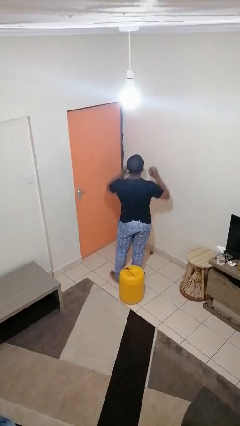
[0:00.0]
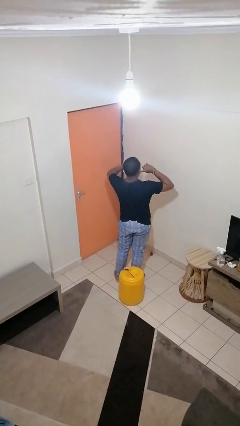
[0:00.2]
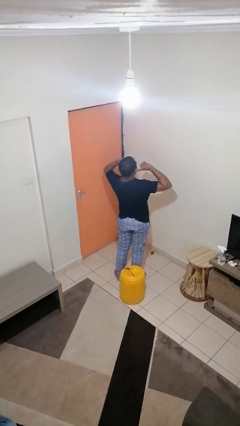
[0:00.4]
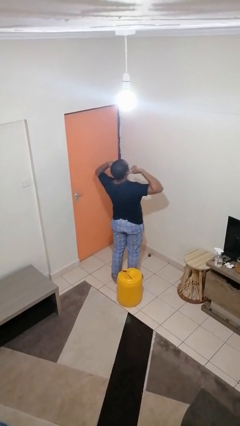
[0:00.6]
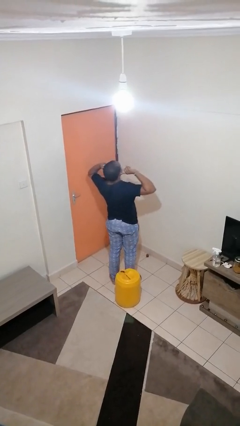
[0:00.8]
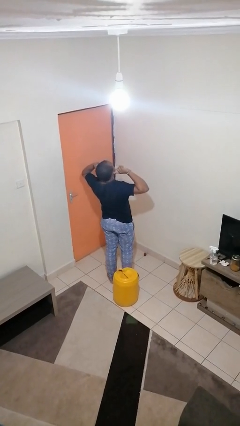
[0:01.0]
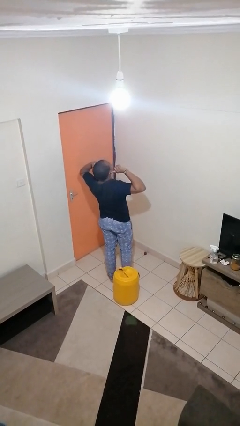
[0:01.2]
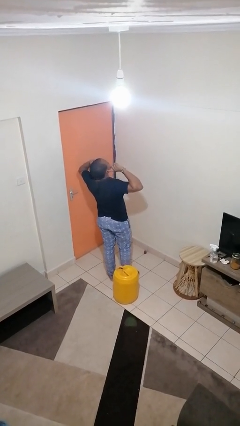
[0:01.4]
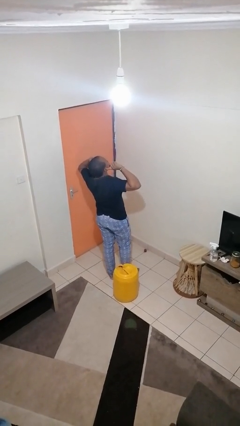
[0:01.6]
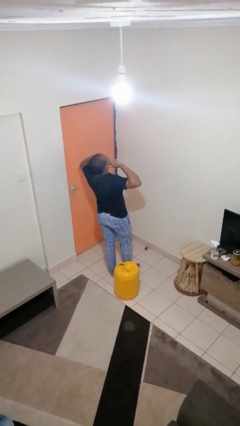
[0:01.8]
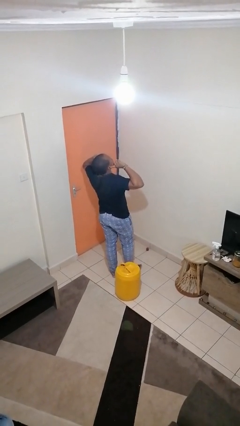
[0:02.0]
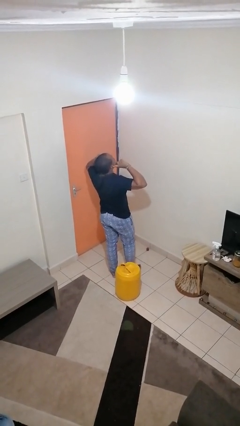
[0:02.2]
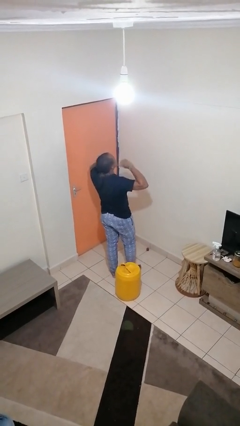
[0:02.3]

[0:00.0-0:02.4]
person puts fingers in ear

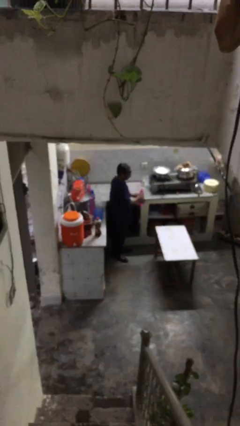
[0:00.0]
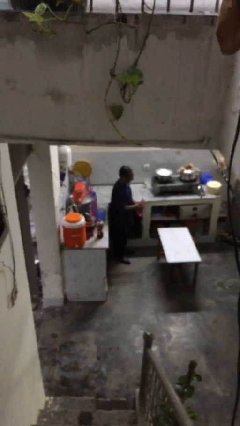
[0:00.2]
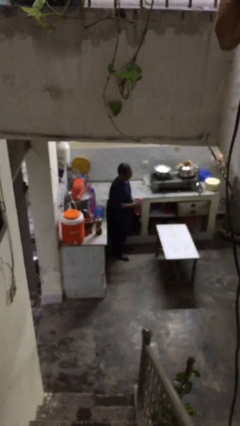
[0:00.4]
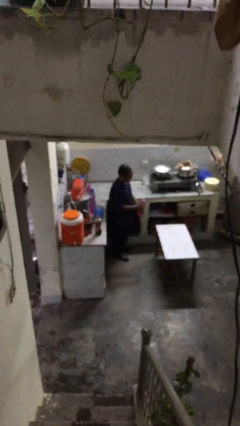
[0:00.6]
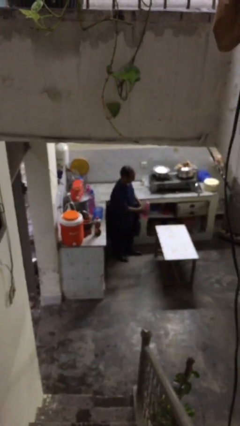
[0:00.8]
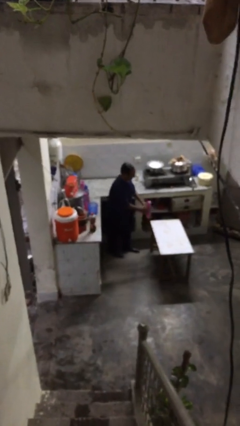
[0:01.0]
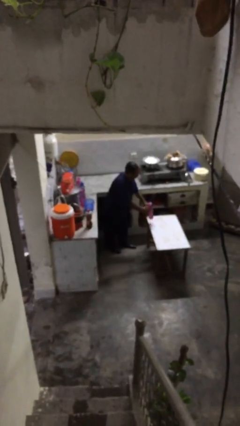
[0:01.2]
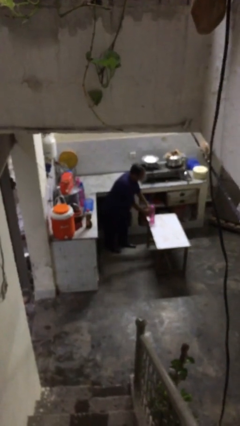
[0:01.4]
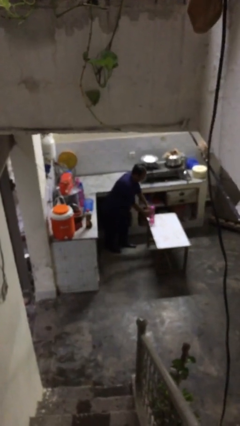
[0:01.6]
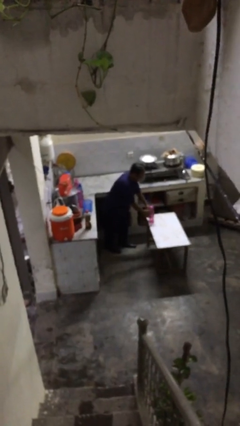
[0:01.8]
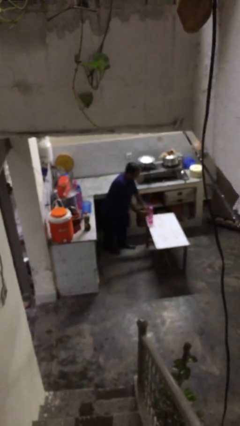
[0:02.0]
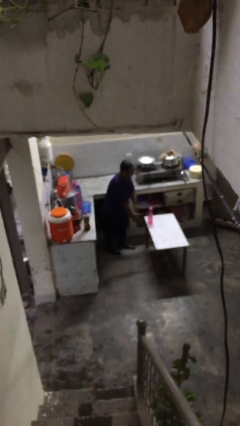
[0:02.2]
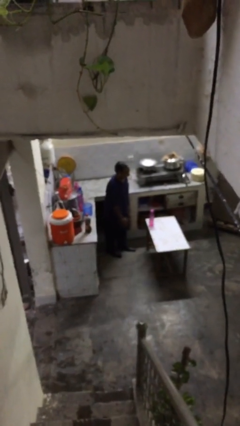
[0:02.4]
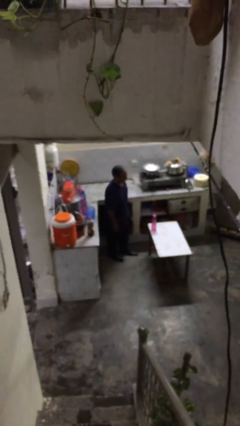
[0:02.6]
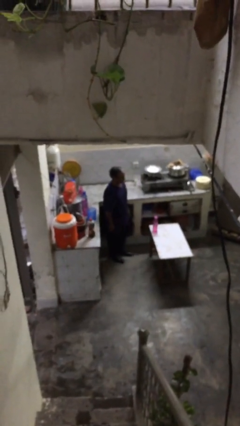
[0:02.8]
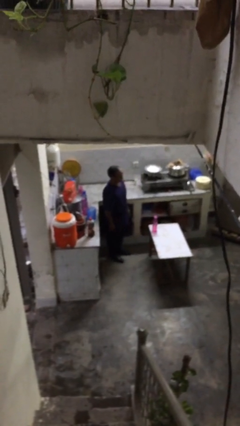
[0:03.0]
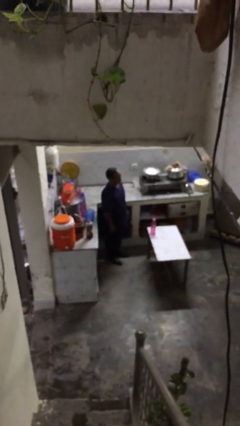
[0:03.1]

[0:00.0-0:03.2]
person puts down object on table

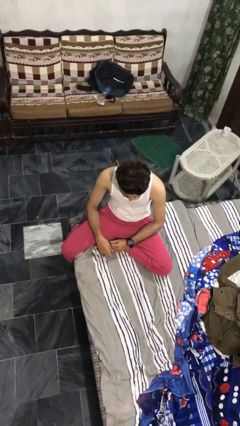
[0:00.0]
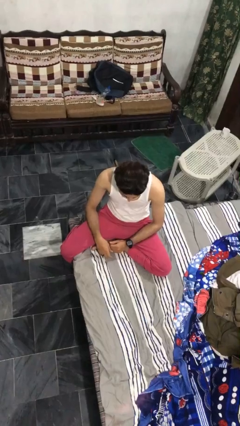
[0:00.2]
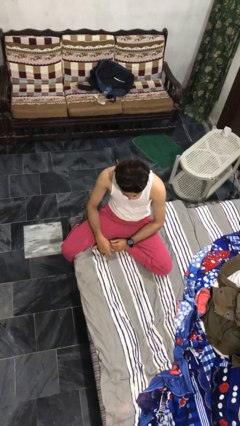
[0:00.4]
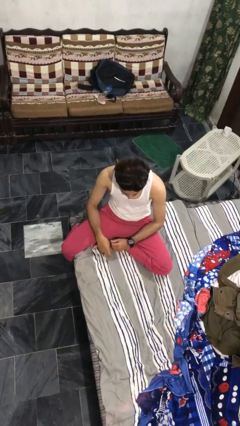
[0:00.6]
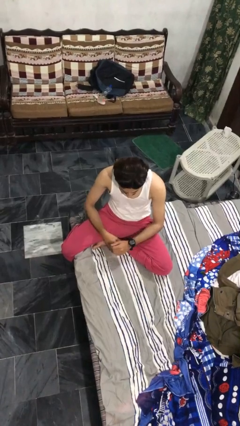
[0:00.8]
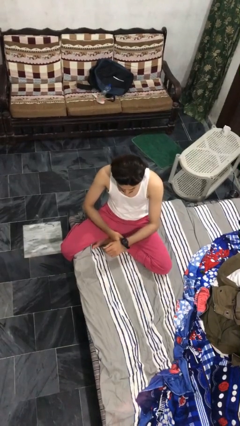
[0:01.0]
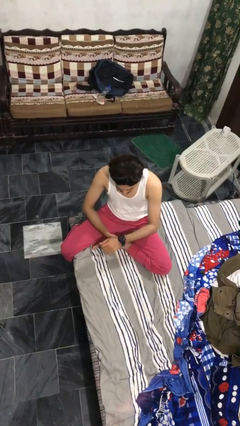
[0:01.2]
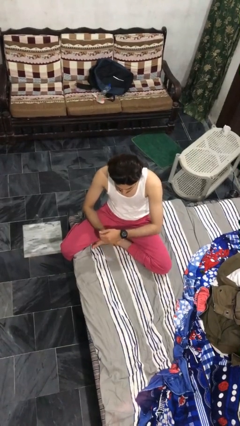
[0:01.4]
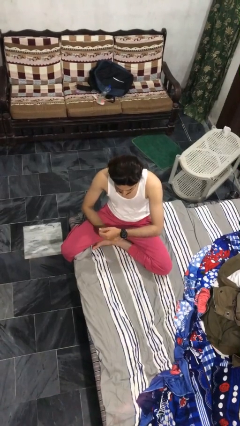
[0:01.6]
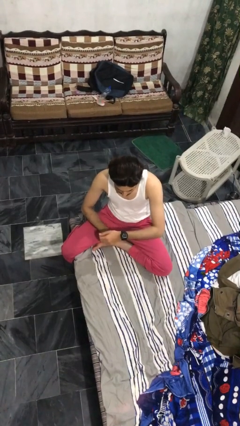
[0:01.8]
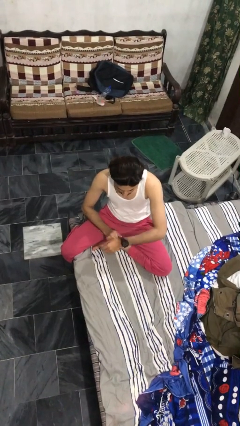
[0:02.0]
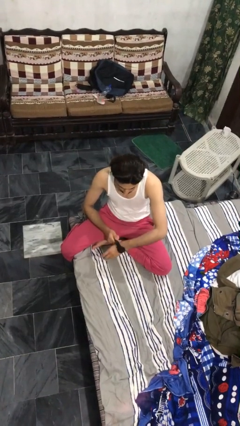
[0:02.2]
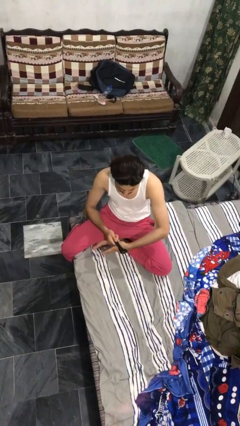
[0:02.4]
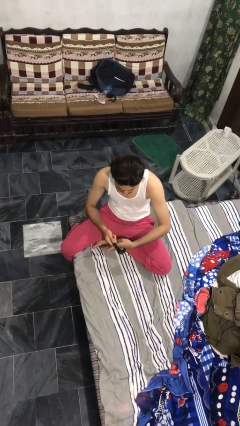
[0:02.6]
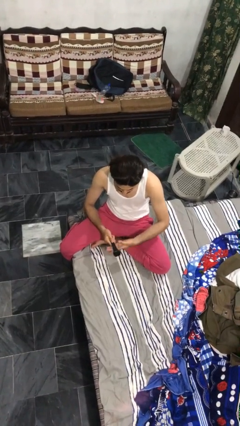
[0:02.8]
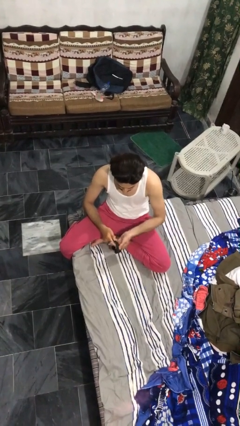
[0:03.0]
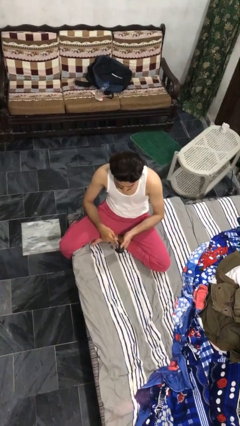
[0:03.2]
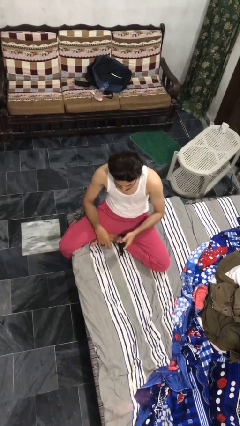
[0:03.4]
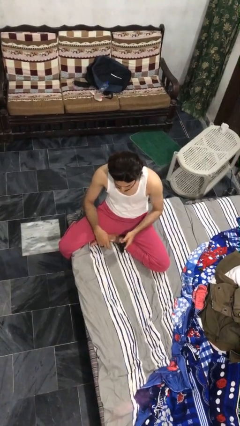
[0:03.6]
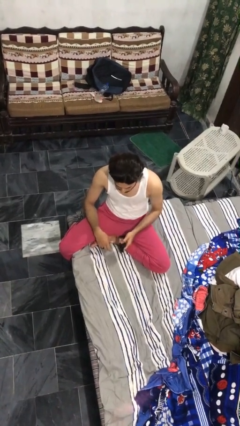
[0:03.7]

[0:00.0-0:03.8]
person takes off wristwatch

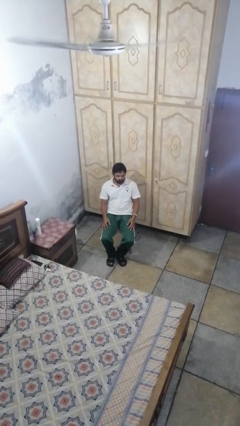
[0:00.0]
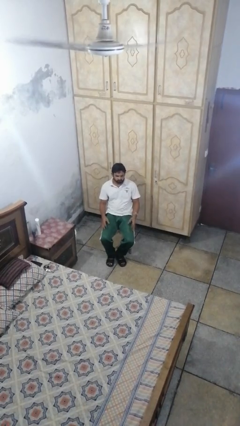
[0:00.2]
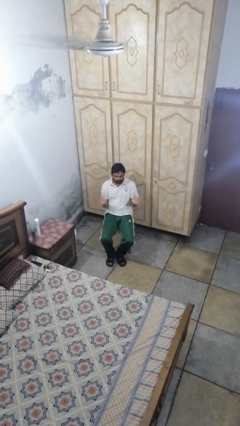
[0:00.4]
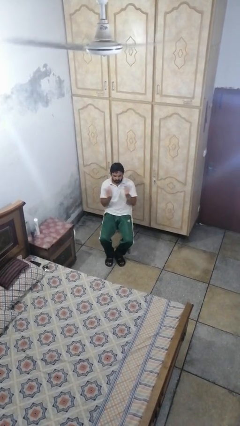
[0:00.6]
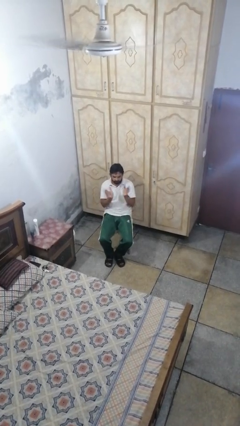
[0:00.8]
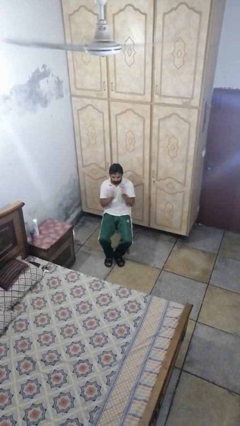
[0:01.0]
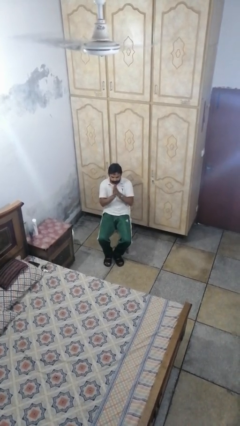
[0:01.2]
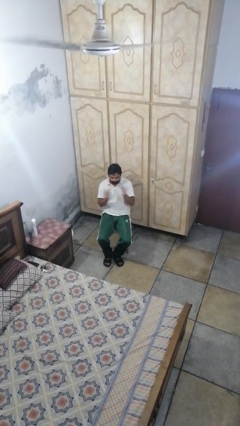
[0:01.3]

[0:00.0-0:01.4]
person claps hands

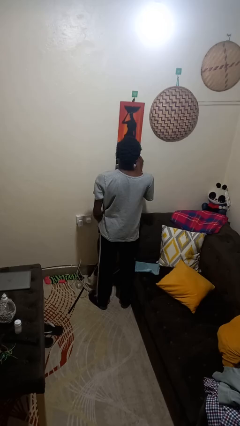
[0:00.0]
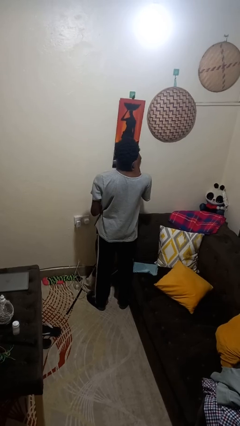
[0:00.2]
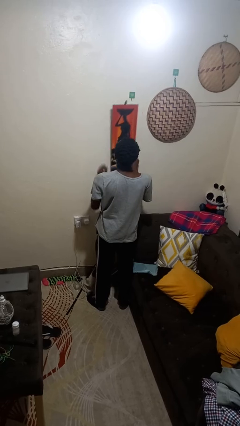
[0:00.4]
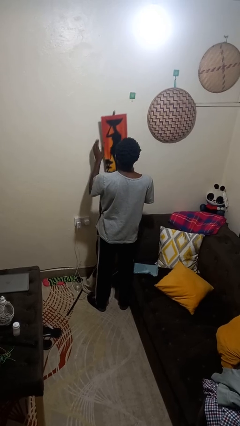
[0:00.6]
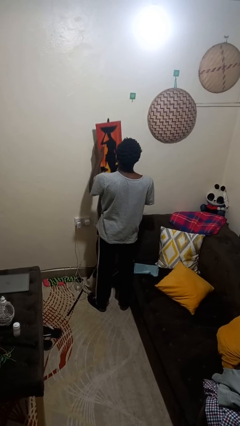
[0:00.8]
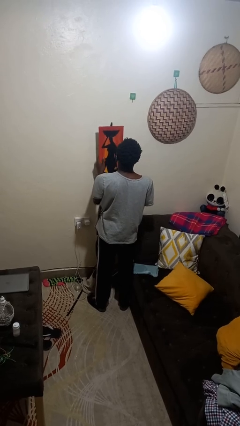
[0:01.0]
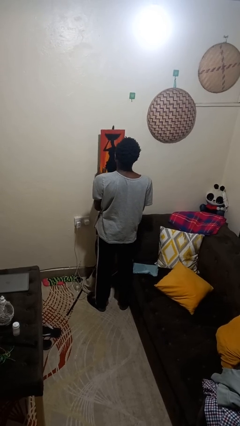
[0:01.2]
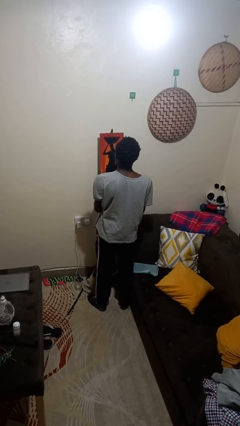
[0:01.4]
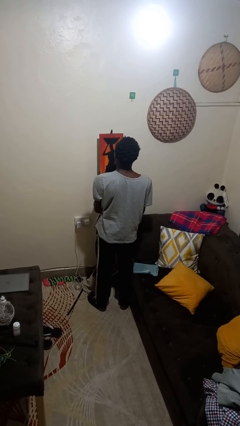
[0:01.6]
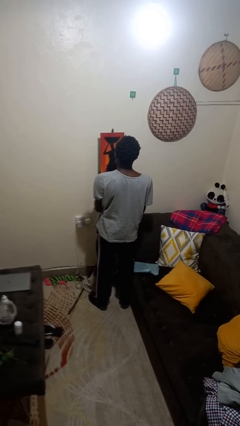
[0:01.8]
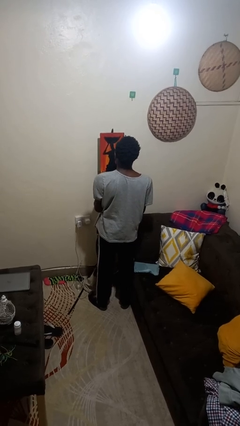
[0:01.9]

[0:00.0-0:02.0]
person takes down picture frame

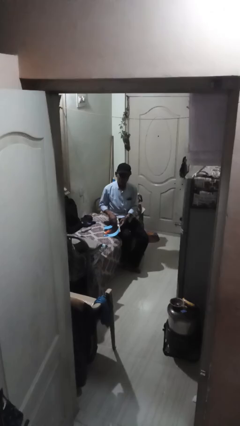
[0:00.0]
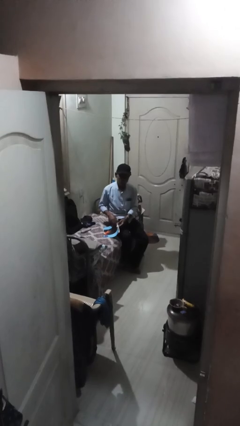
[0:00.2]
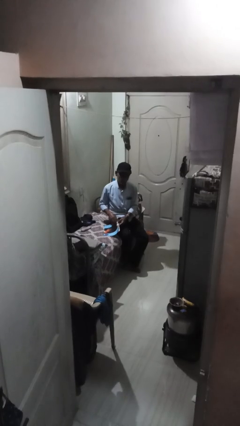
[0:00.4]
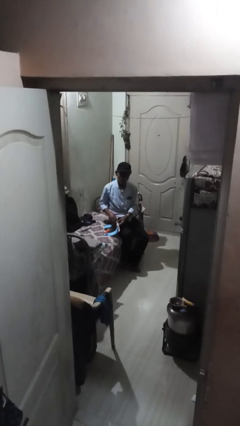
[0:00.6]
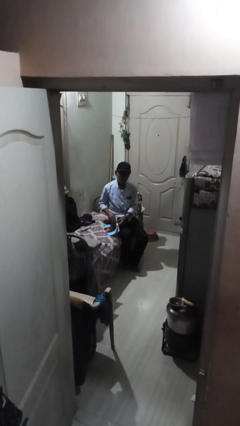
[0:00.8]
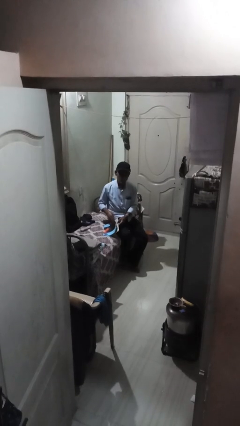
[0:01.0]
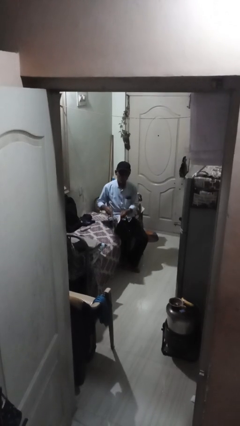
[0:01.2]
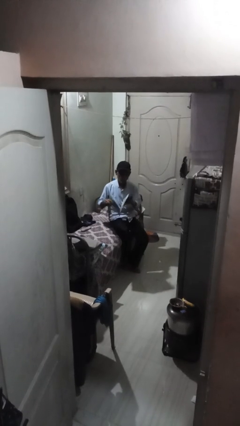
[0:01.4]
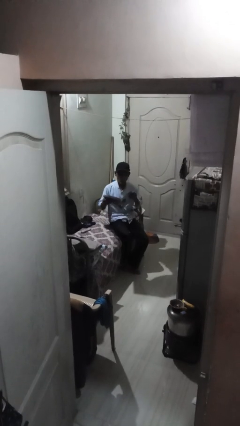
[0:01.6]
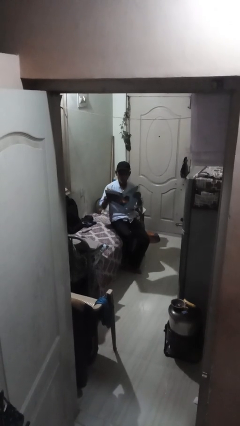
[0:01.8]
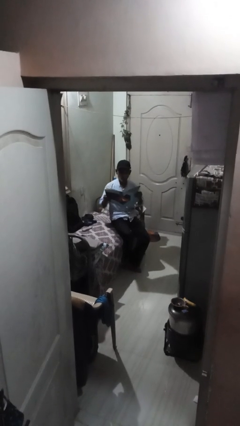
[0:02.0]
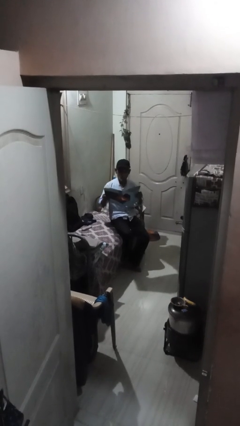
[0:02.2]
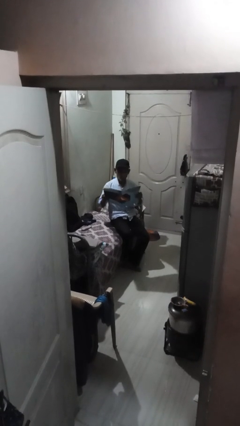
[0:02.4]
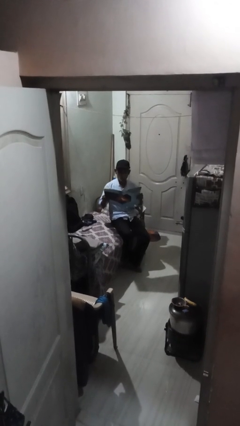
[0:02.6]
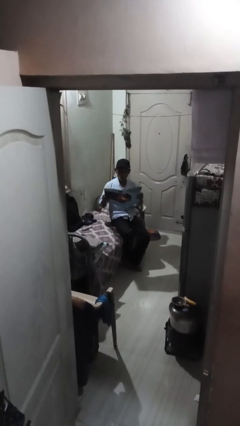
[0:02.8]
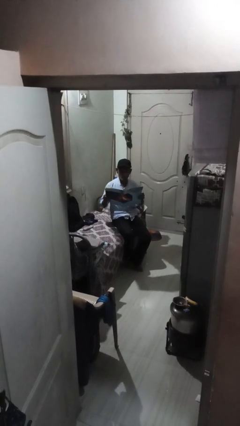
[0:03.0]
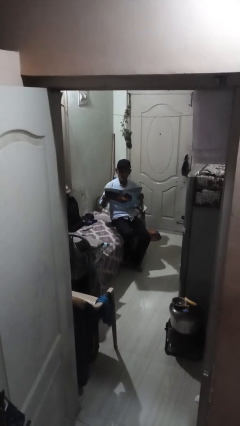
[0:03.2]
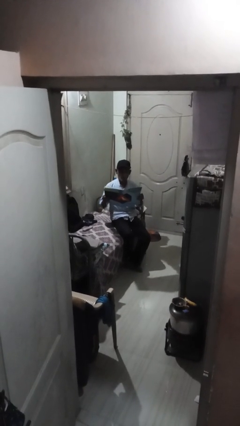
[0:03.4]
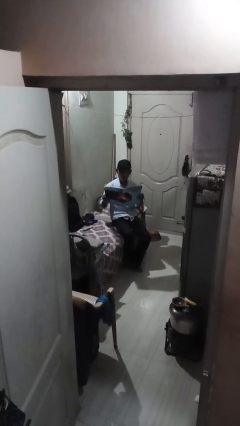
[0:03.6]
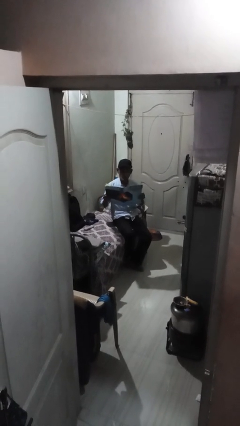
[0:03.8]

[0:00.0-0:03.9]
person reads magazine

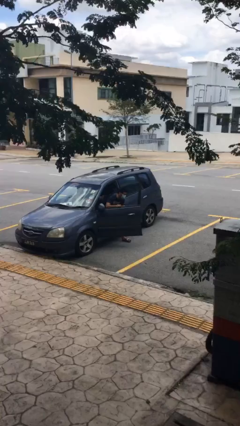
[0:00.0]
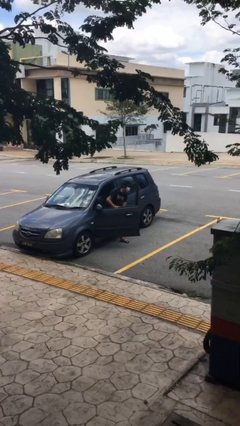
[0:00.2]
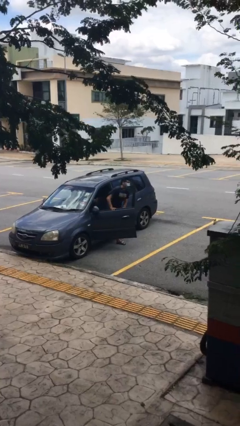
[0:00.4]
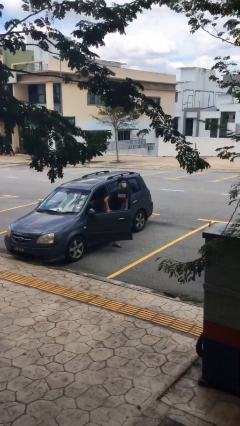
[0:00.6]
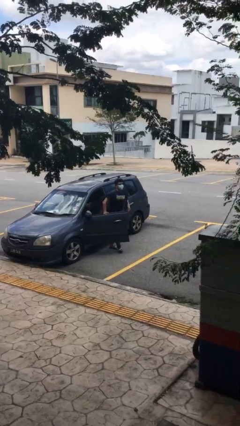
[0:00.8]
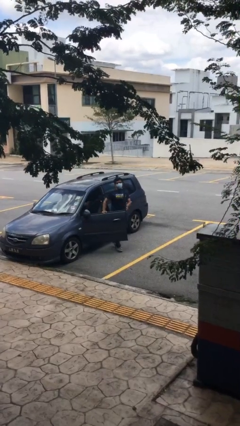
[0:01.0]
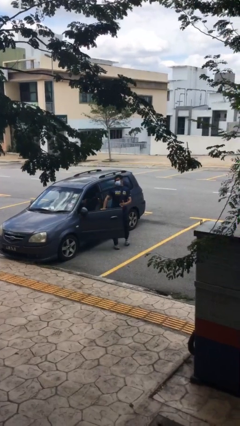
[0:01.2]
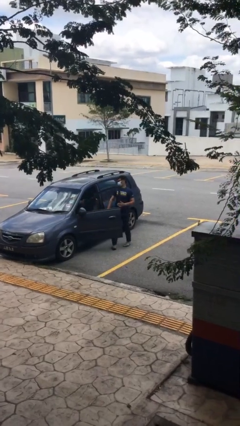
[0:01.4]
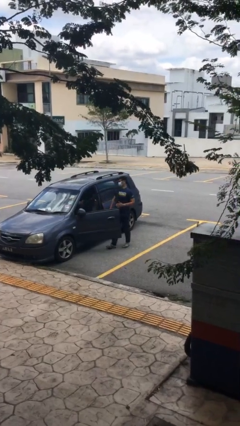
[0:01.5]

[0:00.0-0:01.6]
person exits car
